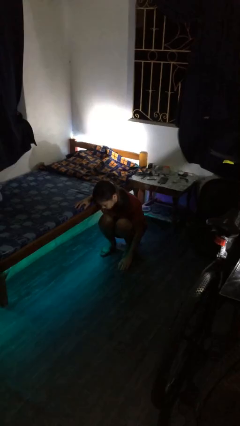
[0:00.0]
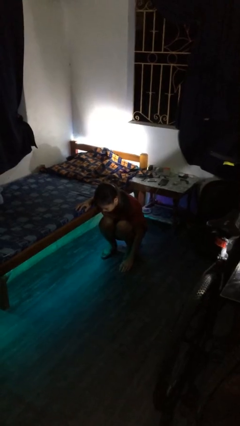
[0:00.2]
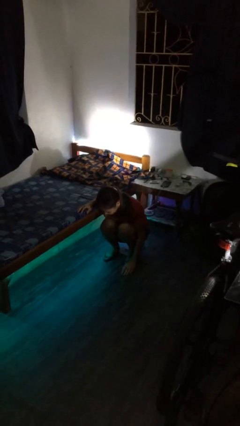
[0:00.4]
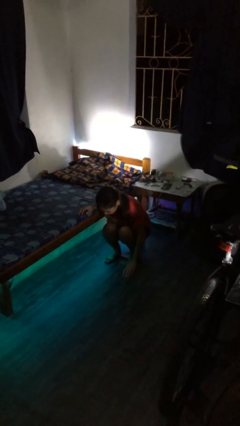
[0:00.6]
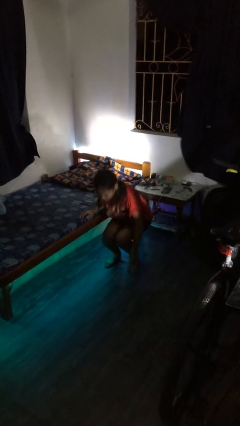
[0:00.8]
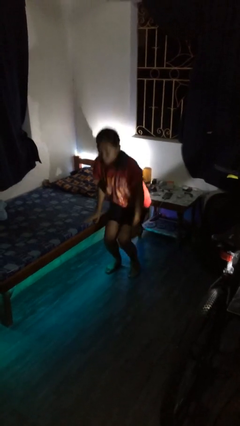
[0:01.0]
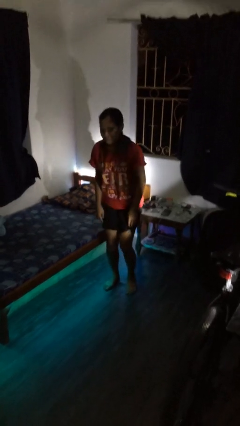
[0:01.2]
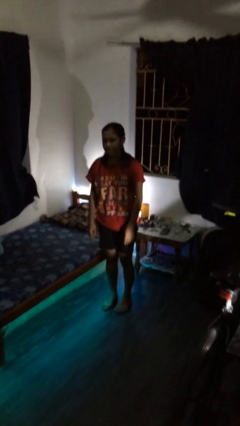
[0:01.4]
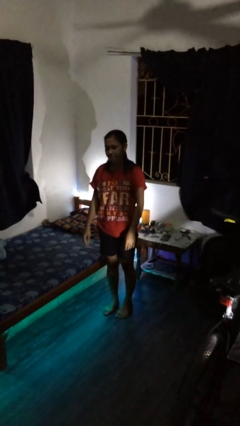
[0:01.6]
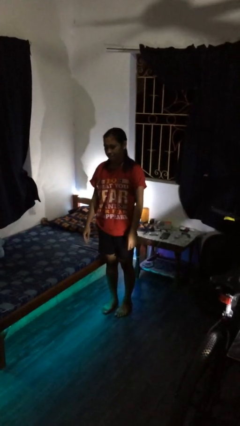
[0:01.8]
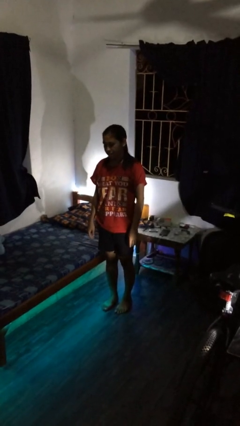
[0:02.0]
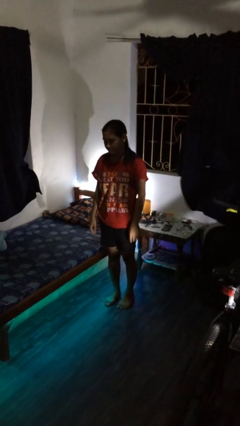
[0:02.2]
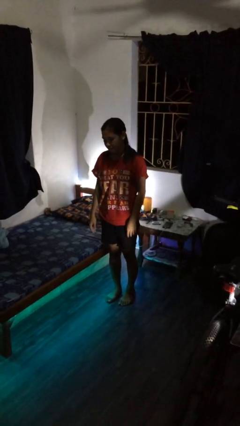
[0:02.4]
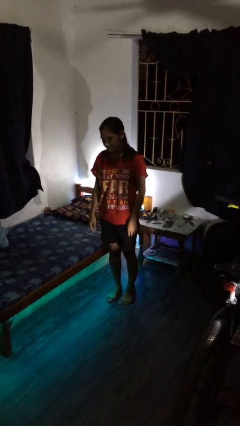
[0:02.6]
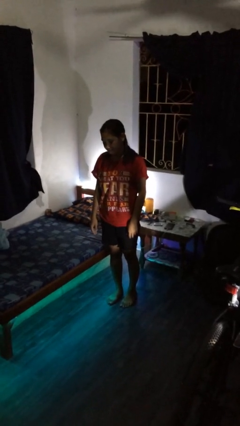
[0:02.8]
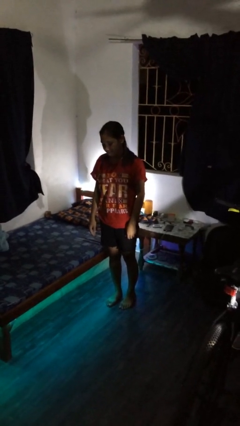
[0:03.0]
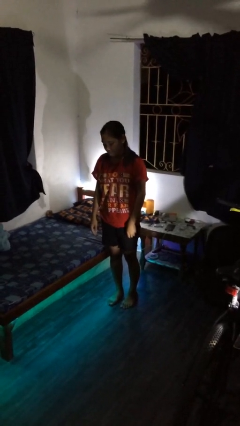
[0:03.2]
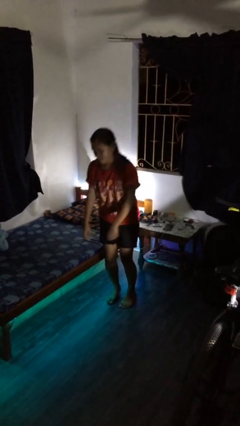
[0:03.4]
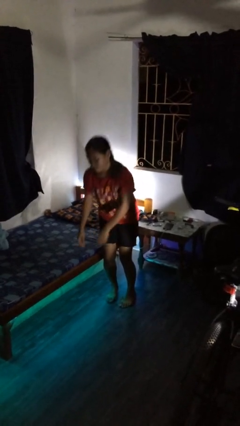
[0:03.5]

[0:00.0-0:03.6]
person stands up from floor

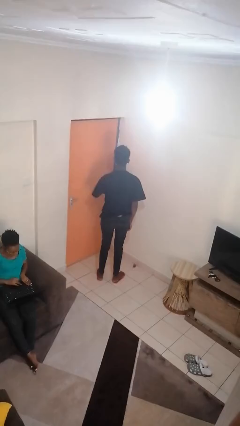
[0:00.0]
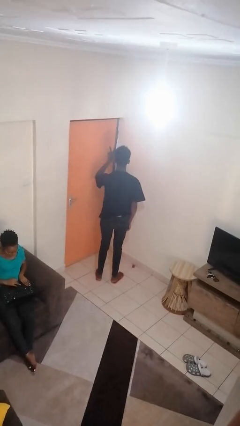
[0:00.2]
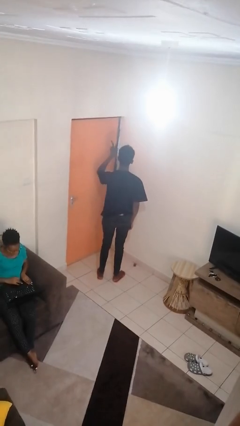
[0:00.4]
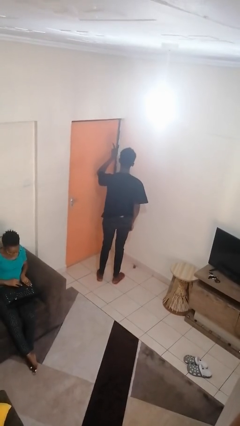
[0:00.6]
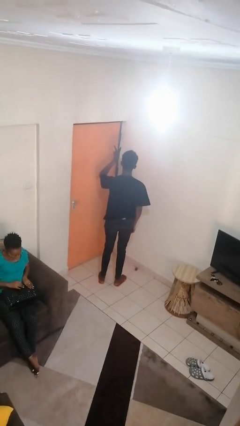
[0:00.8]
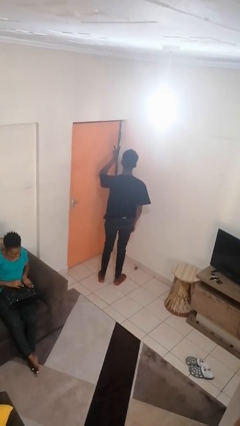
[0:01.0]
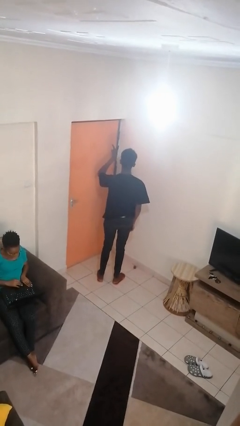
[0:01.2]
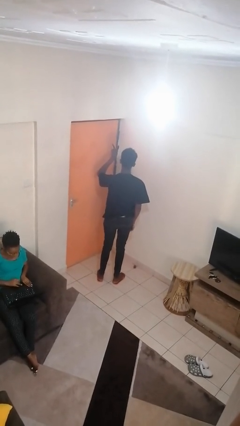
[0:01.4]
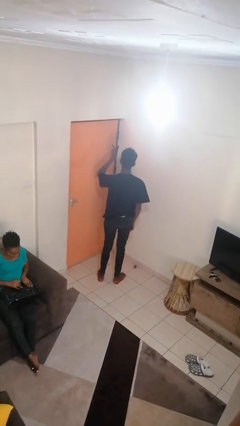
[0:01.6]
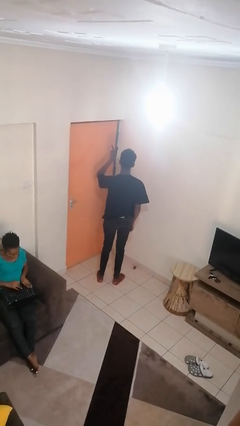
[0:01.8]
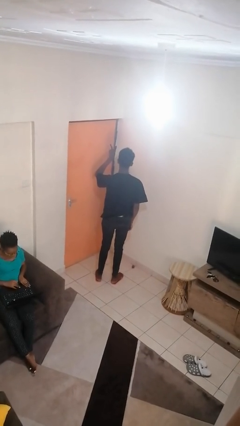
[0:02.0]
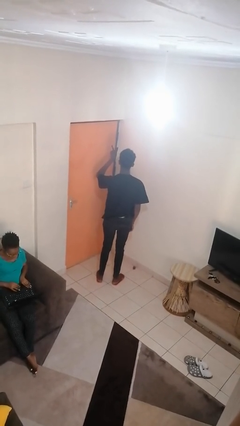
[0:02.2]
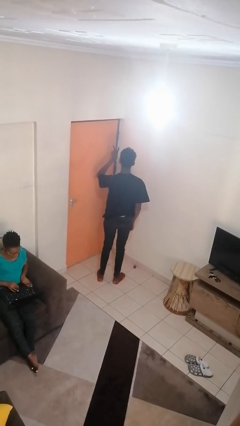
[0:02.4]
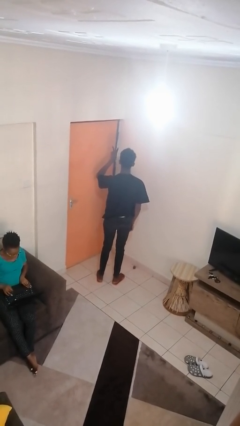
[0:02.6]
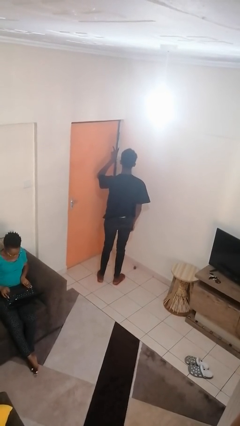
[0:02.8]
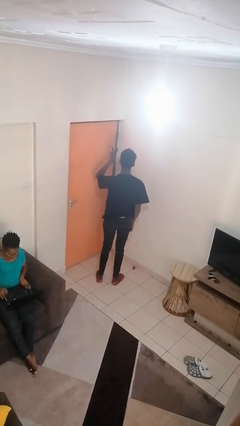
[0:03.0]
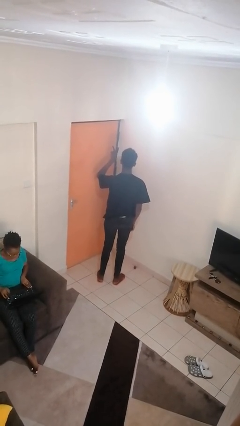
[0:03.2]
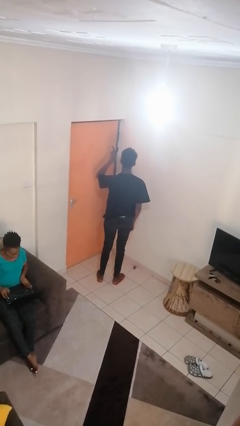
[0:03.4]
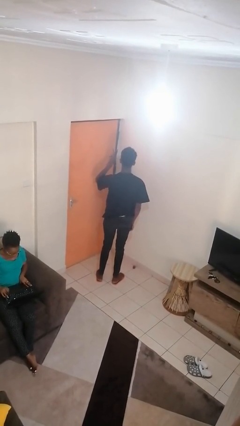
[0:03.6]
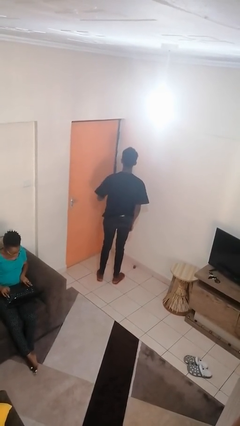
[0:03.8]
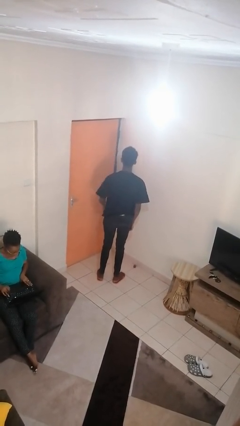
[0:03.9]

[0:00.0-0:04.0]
person gestures peace

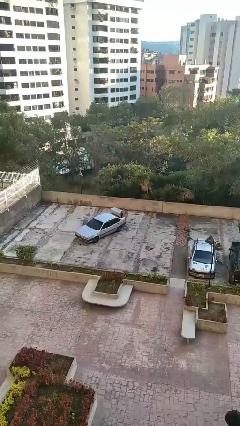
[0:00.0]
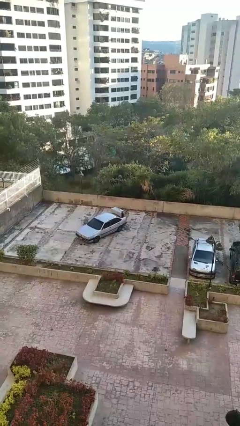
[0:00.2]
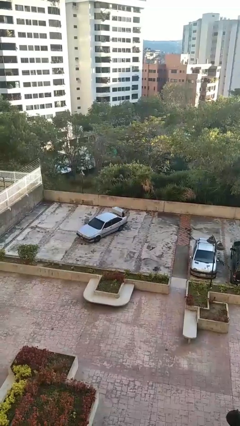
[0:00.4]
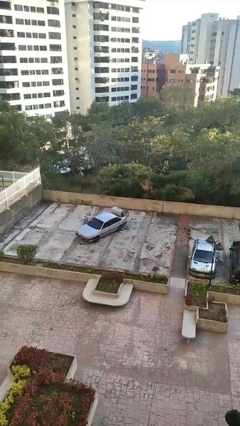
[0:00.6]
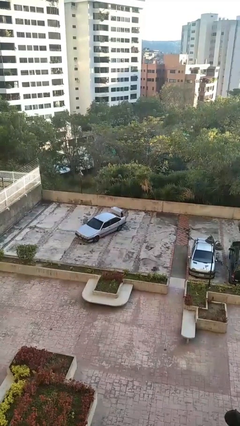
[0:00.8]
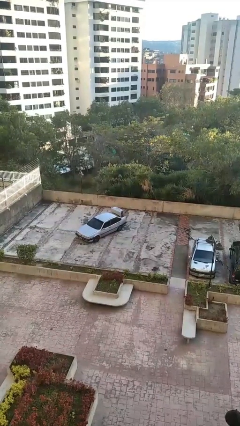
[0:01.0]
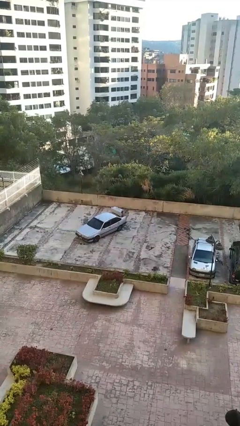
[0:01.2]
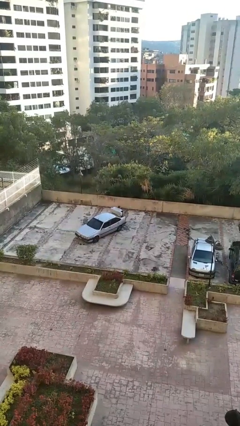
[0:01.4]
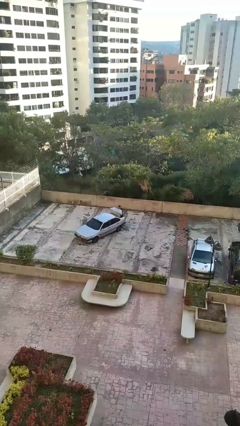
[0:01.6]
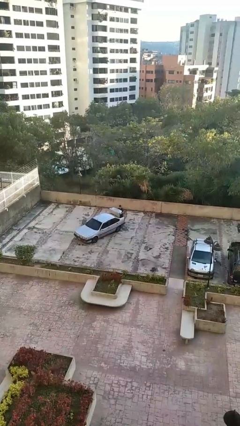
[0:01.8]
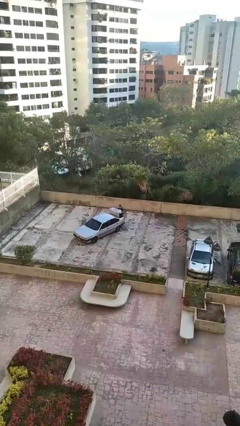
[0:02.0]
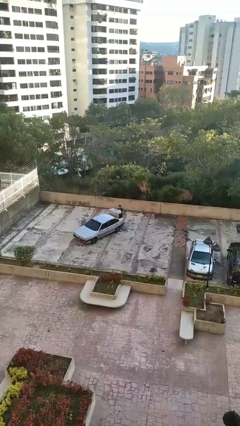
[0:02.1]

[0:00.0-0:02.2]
person unloads car

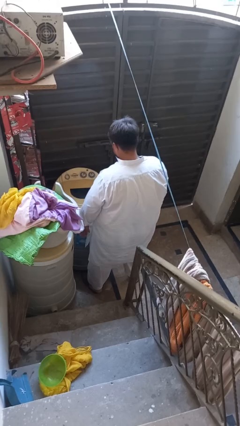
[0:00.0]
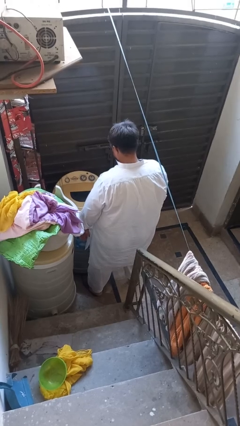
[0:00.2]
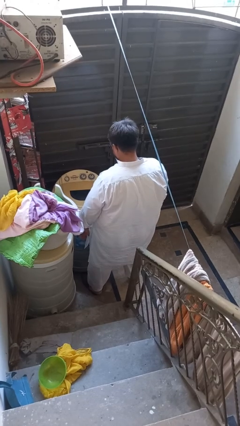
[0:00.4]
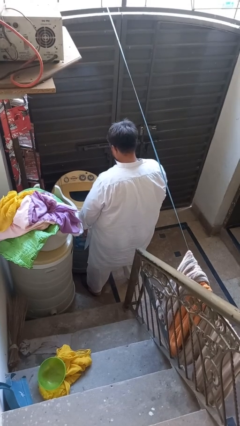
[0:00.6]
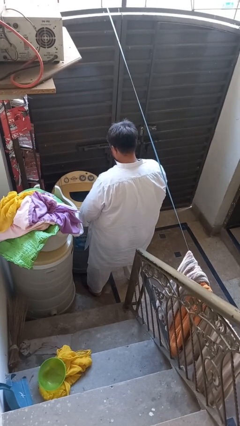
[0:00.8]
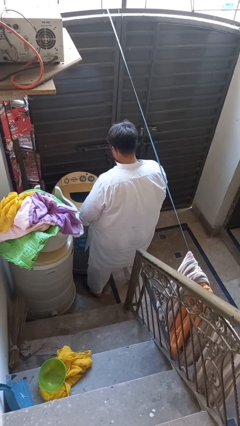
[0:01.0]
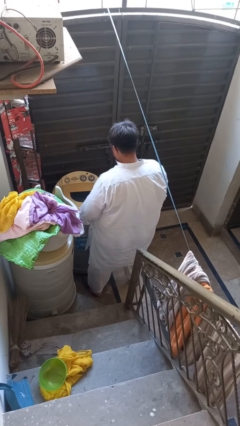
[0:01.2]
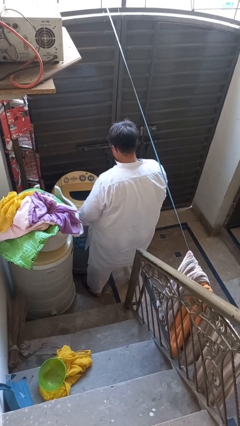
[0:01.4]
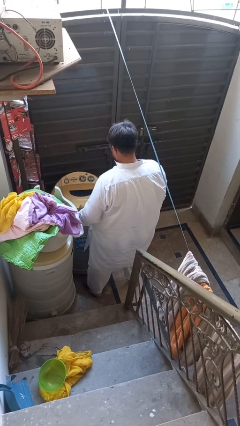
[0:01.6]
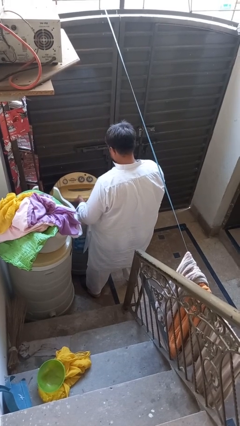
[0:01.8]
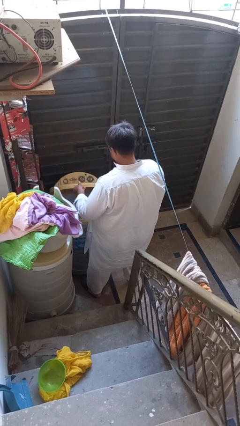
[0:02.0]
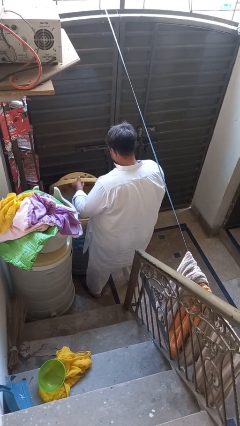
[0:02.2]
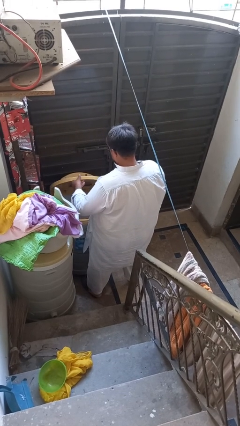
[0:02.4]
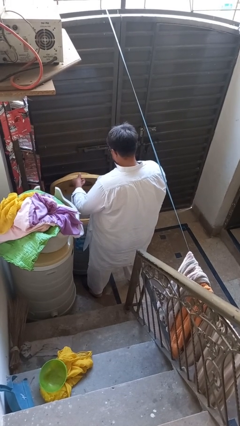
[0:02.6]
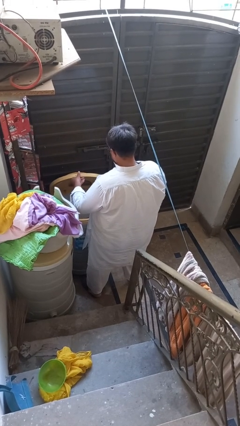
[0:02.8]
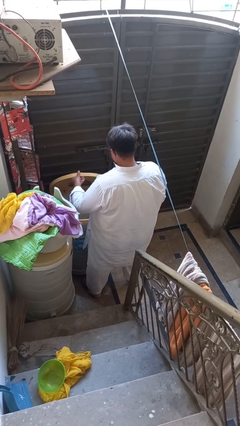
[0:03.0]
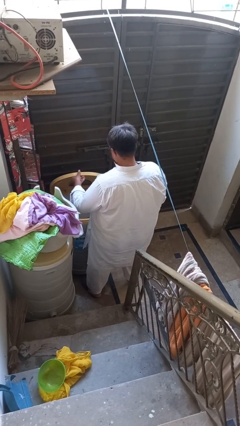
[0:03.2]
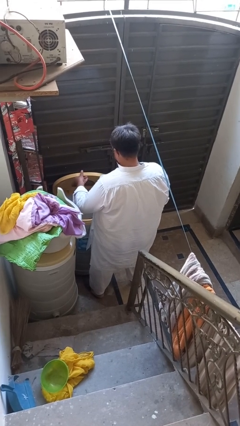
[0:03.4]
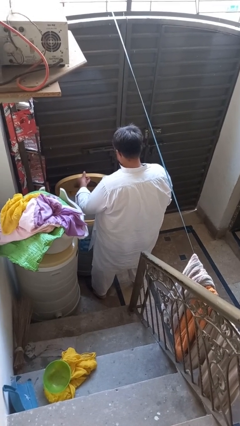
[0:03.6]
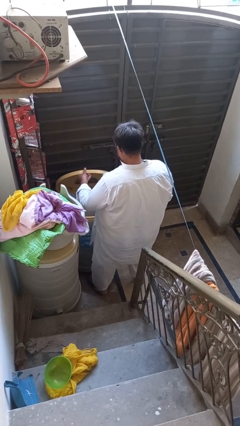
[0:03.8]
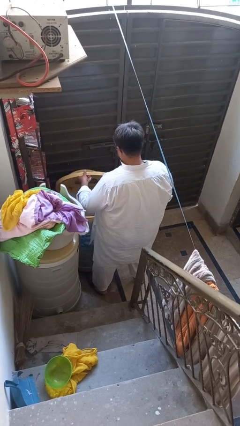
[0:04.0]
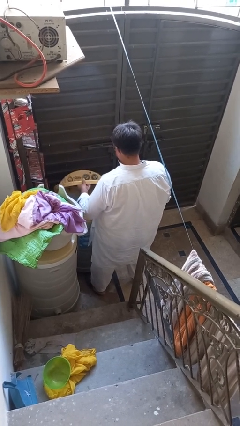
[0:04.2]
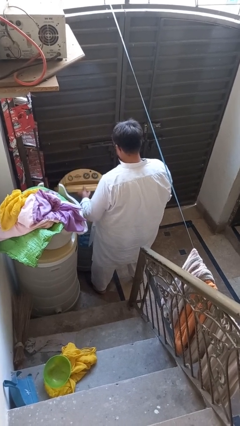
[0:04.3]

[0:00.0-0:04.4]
person opens clothes washer

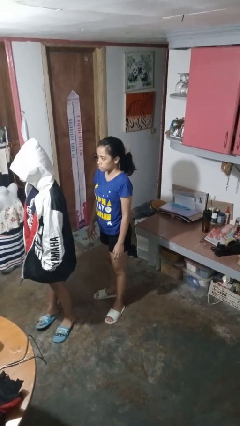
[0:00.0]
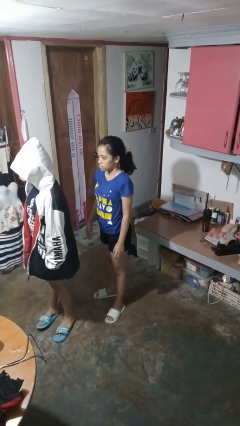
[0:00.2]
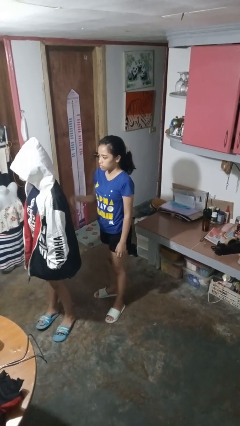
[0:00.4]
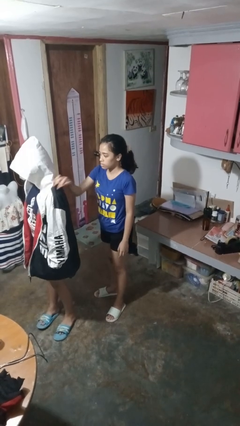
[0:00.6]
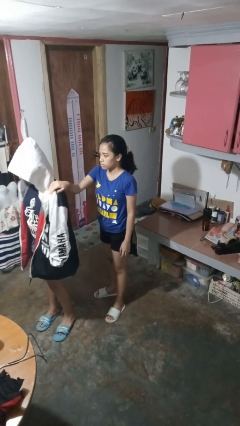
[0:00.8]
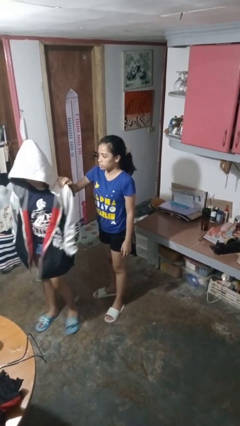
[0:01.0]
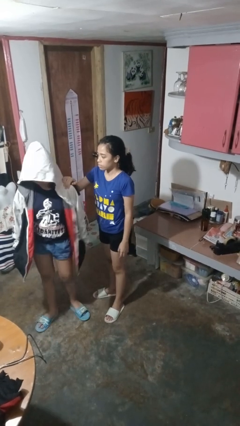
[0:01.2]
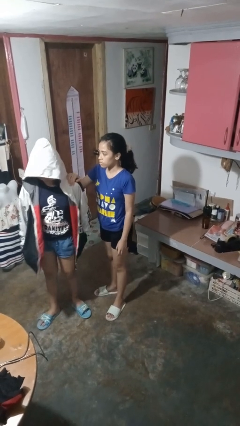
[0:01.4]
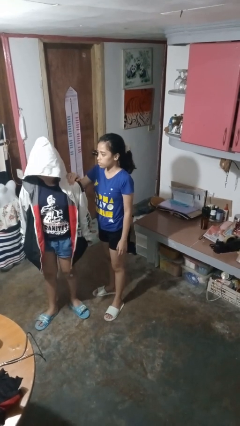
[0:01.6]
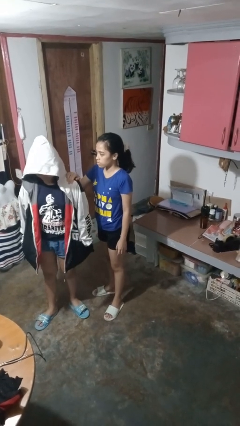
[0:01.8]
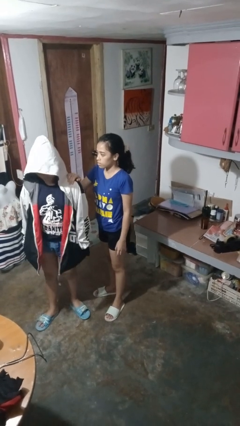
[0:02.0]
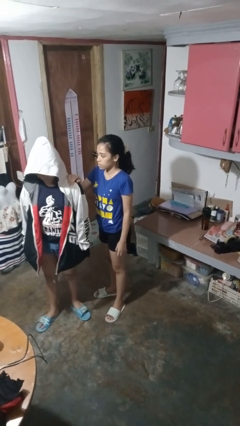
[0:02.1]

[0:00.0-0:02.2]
person grabs person by shoulder

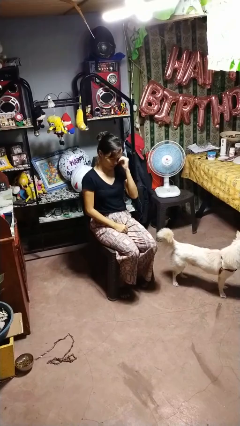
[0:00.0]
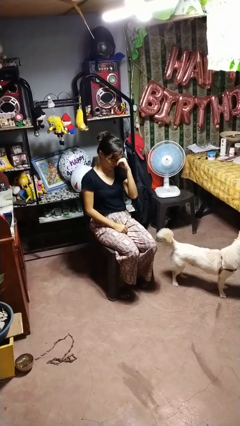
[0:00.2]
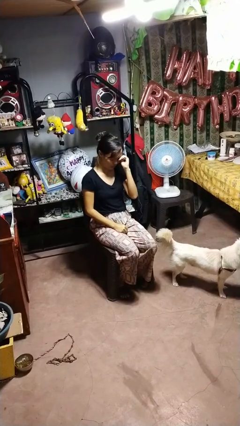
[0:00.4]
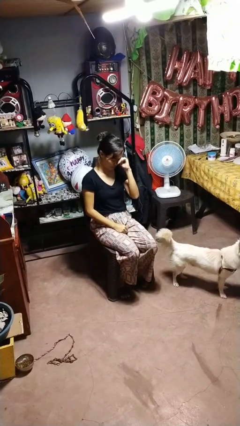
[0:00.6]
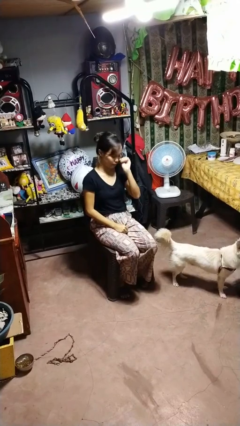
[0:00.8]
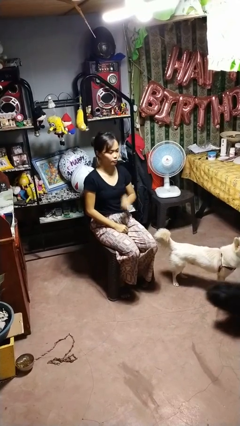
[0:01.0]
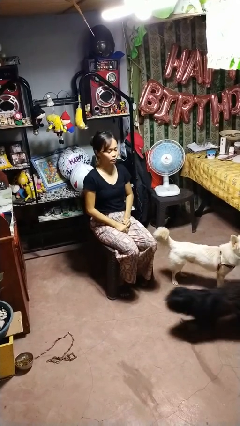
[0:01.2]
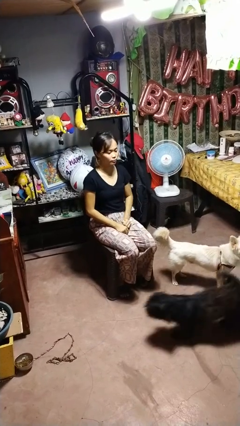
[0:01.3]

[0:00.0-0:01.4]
person rubs eyes
